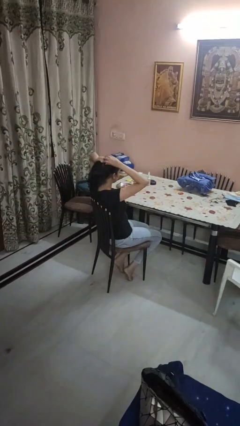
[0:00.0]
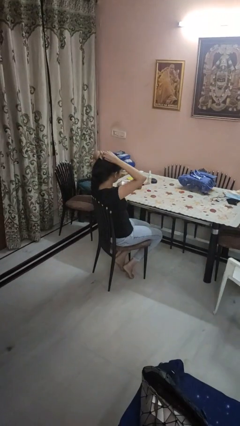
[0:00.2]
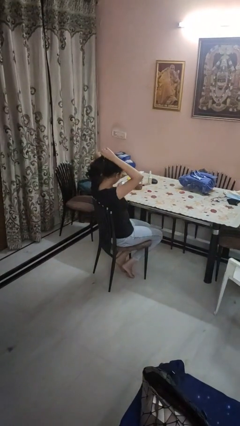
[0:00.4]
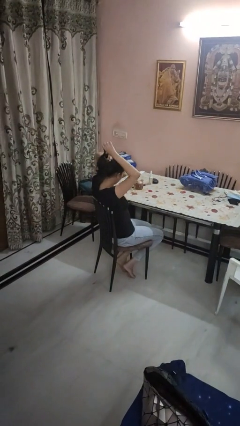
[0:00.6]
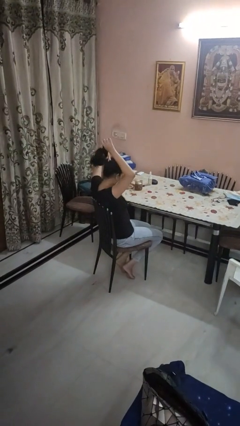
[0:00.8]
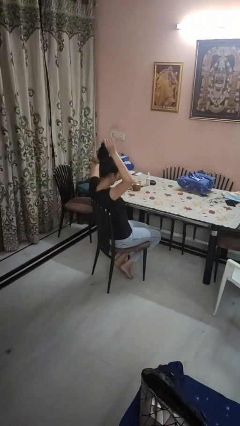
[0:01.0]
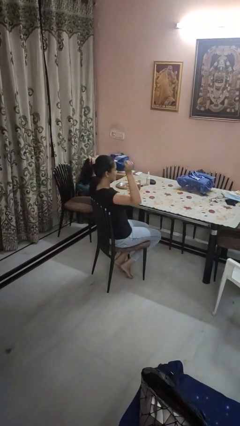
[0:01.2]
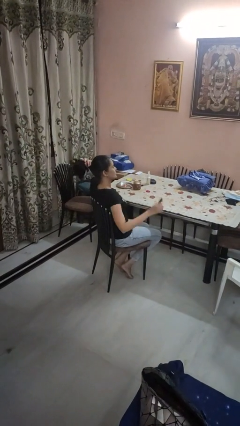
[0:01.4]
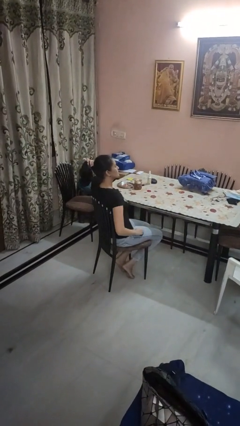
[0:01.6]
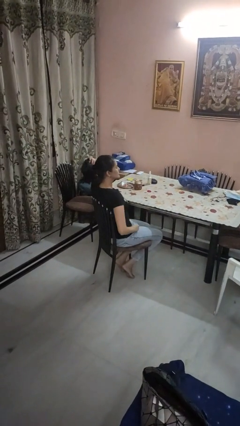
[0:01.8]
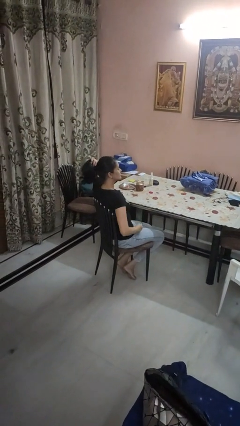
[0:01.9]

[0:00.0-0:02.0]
person takes off hairtie

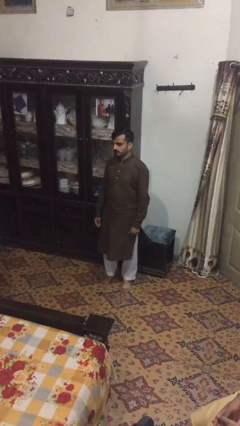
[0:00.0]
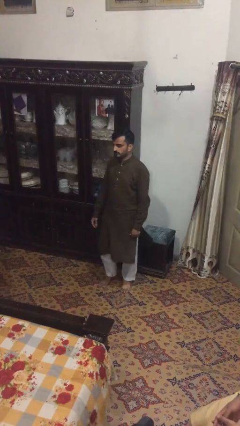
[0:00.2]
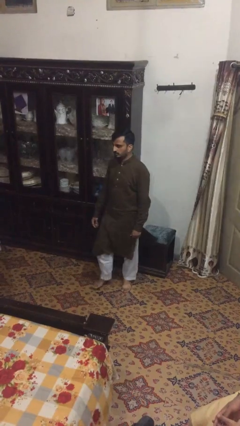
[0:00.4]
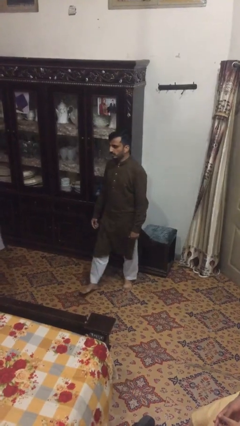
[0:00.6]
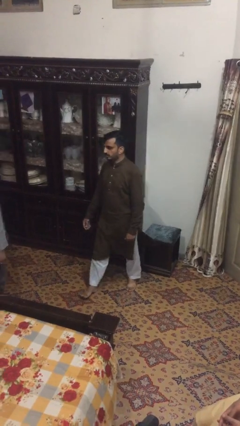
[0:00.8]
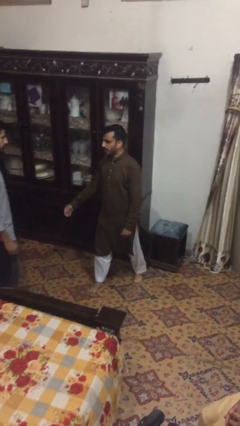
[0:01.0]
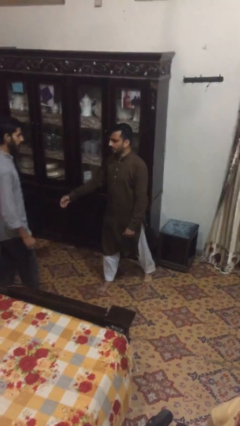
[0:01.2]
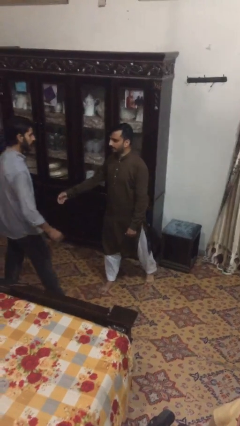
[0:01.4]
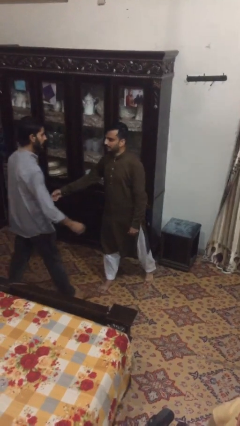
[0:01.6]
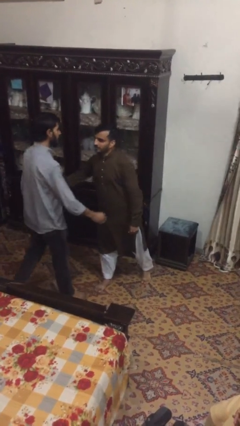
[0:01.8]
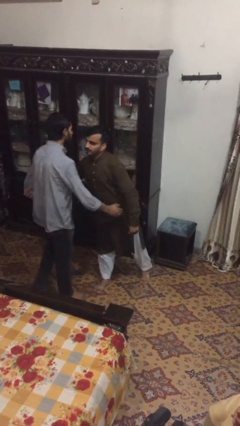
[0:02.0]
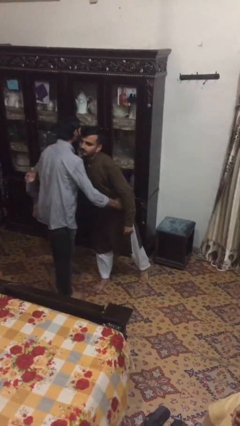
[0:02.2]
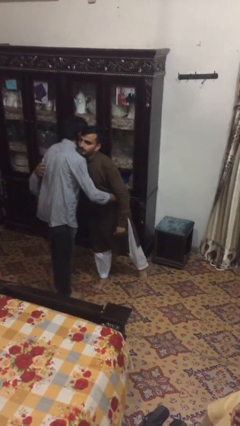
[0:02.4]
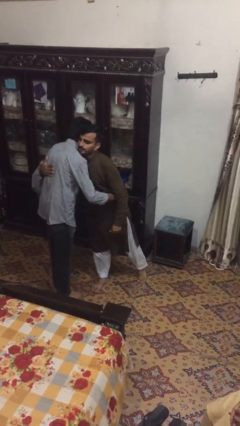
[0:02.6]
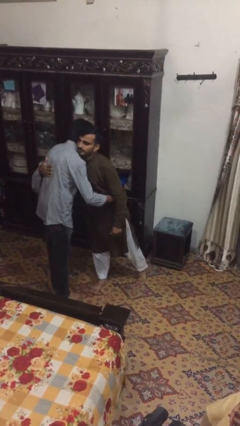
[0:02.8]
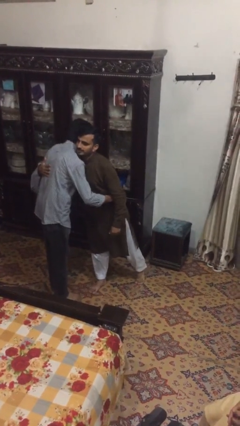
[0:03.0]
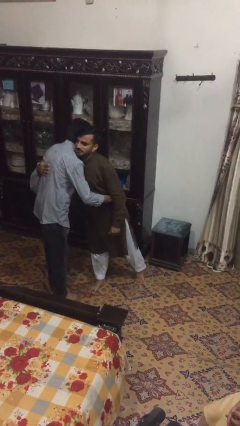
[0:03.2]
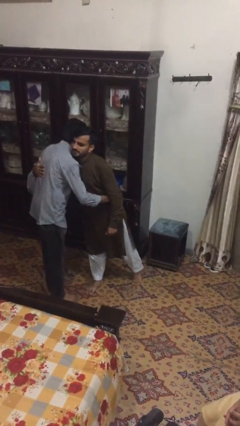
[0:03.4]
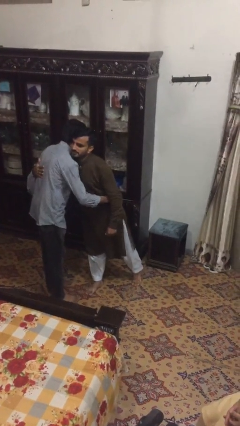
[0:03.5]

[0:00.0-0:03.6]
person embraces person

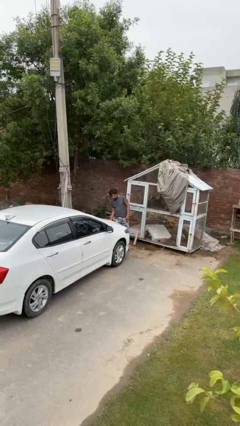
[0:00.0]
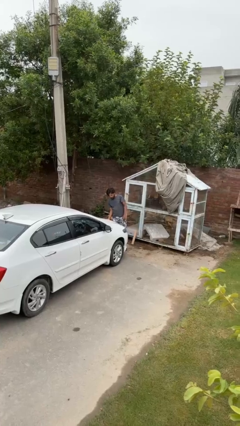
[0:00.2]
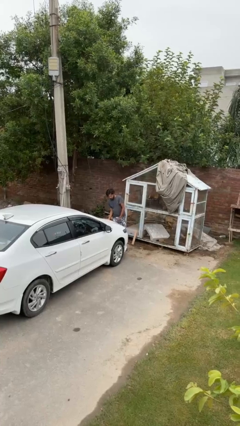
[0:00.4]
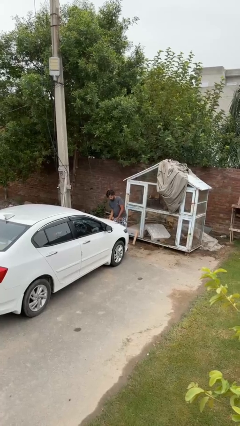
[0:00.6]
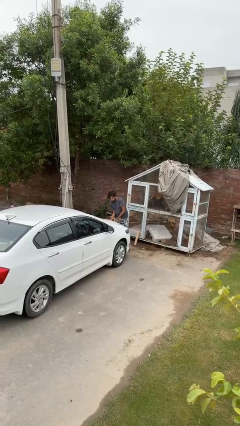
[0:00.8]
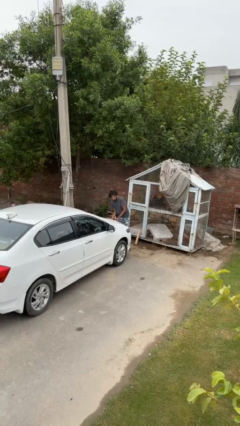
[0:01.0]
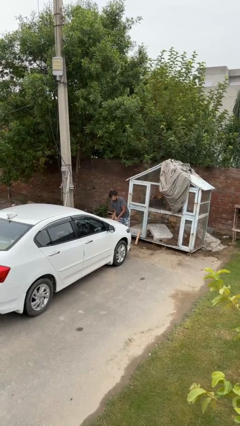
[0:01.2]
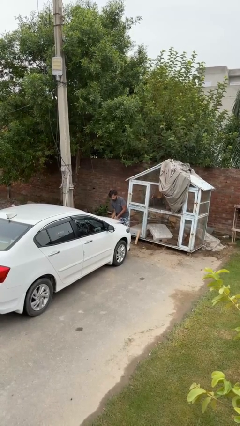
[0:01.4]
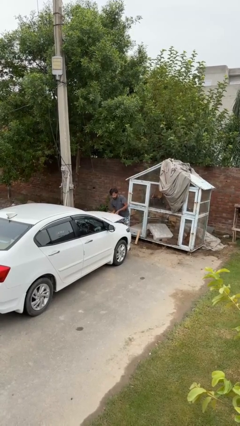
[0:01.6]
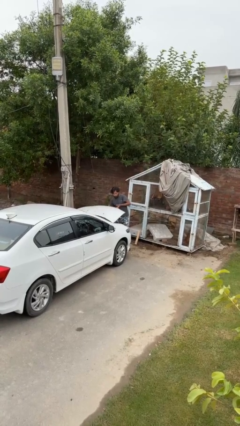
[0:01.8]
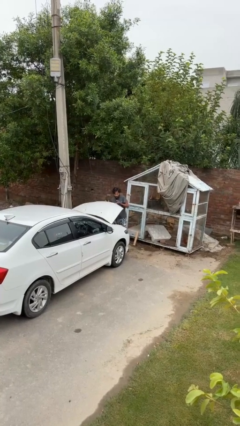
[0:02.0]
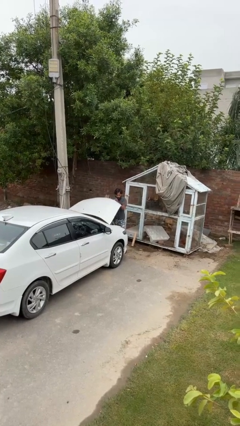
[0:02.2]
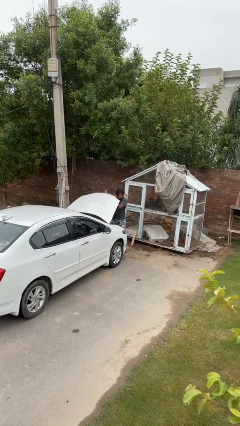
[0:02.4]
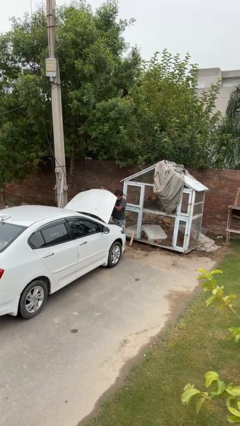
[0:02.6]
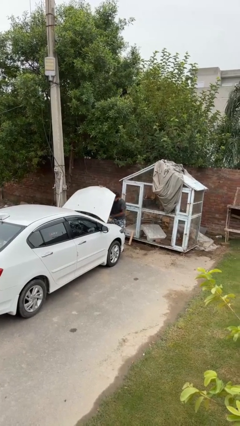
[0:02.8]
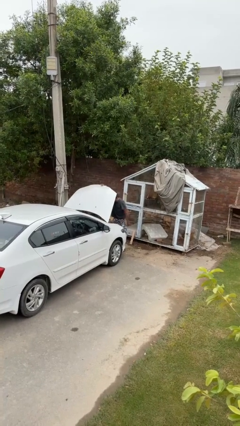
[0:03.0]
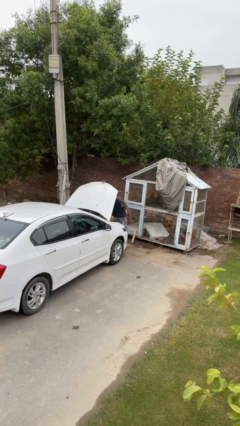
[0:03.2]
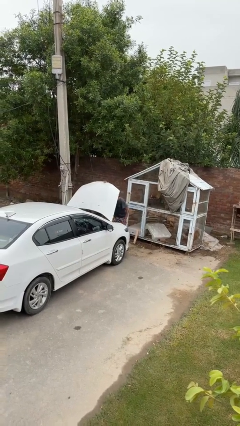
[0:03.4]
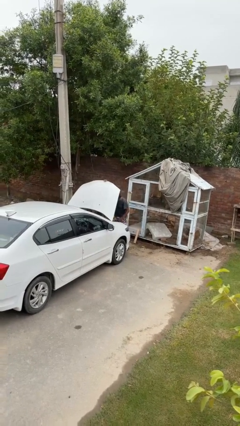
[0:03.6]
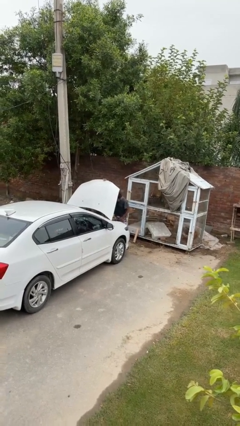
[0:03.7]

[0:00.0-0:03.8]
person opens car hood

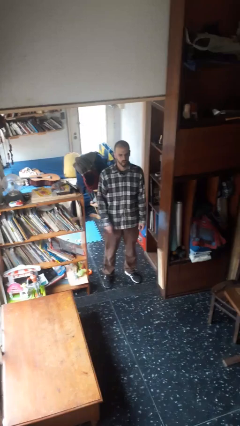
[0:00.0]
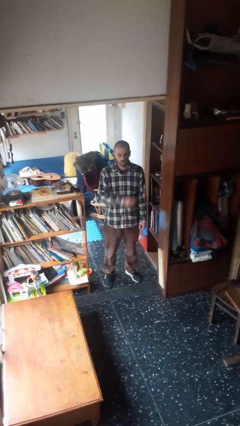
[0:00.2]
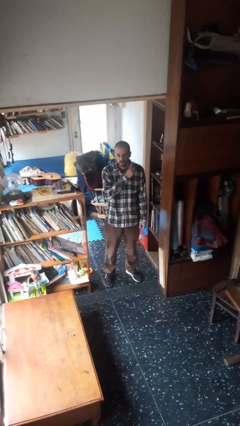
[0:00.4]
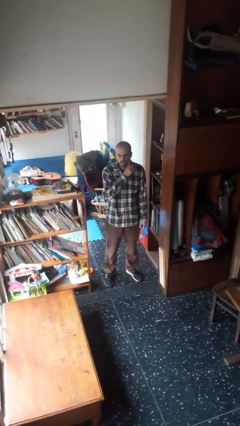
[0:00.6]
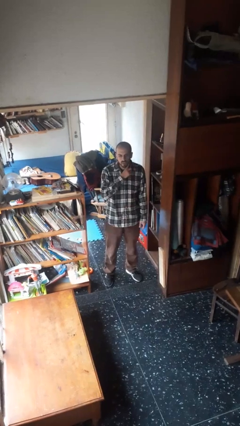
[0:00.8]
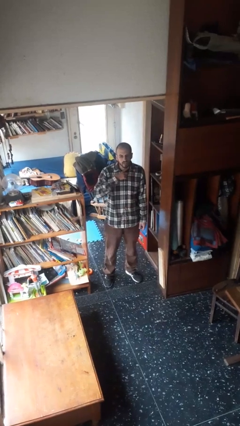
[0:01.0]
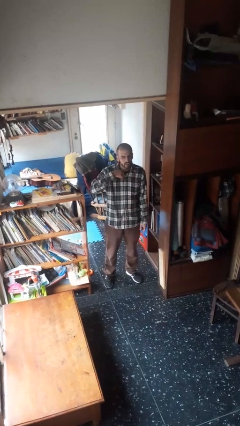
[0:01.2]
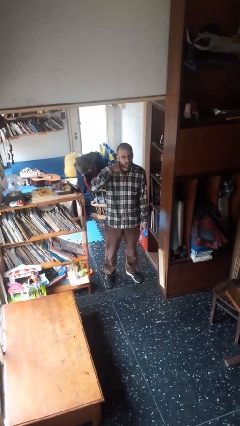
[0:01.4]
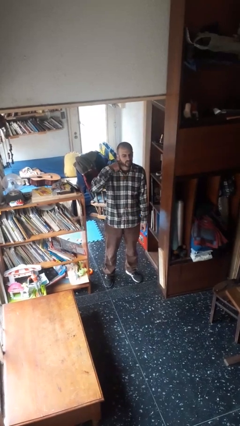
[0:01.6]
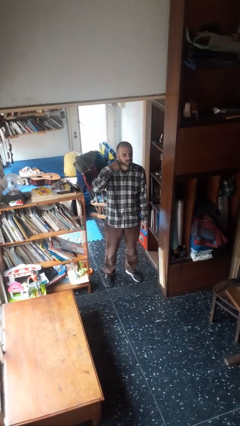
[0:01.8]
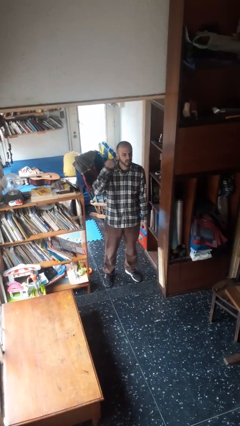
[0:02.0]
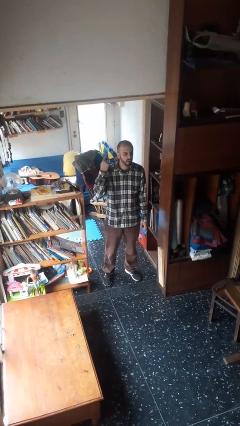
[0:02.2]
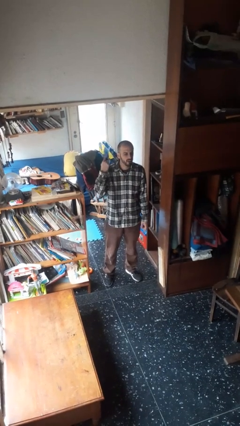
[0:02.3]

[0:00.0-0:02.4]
person gestures cut

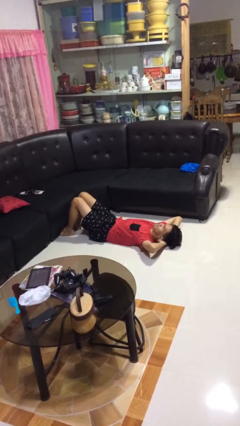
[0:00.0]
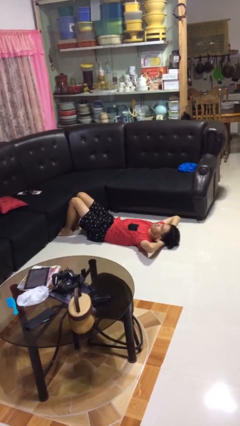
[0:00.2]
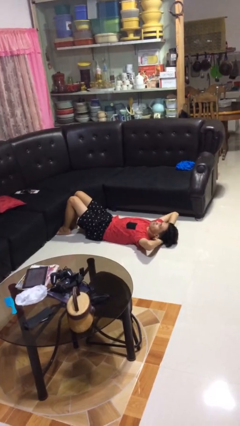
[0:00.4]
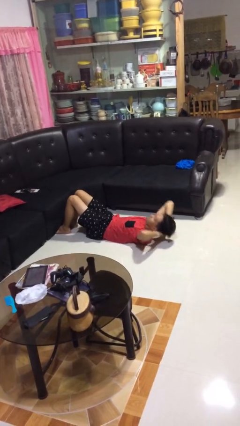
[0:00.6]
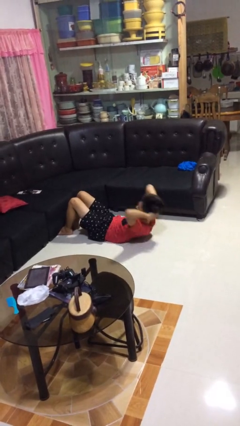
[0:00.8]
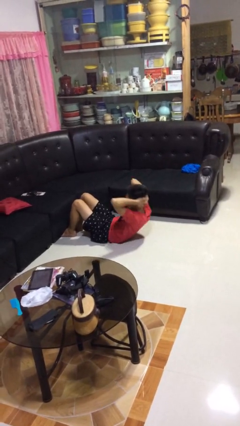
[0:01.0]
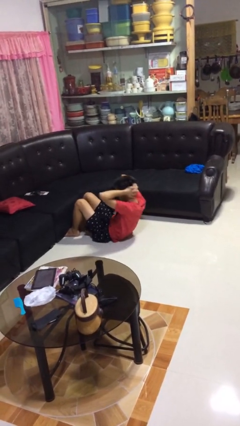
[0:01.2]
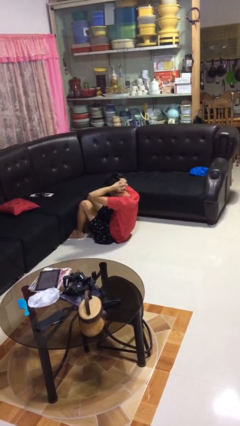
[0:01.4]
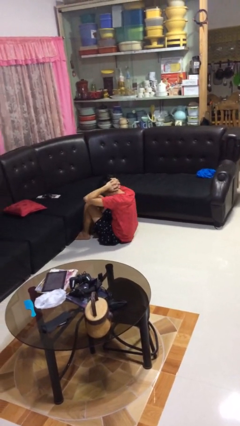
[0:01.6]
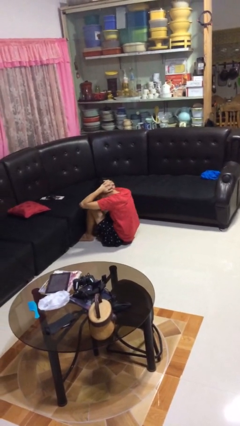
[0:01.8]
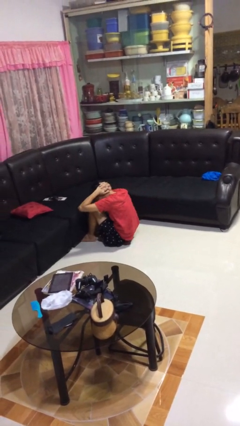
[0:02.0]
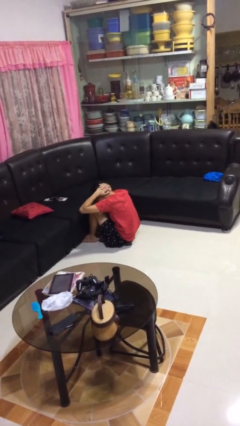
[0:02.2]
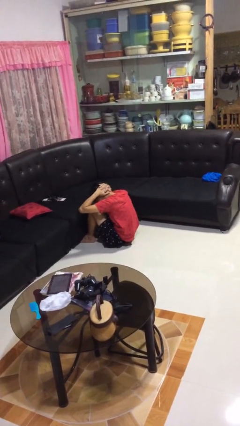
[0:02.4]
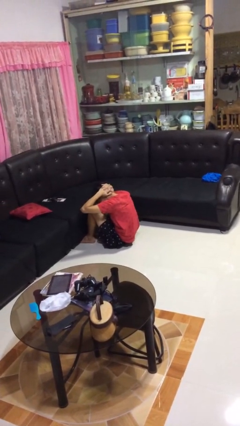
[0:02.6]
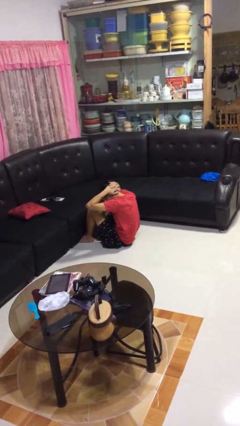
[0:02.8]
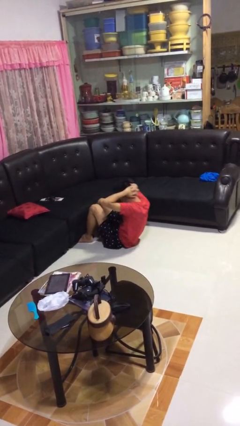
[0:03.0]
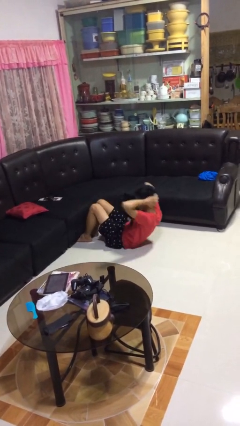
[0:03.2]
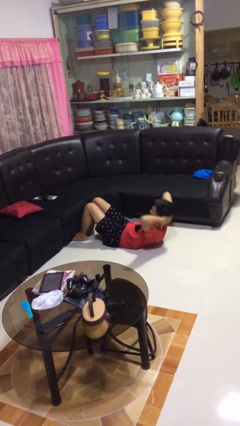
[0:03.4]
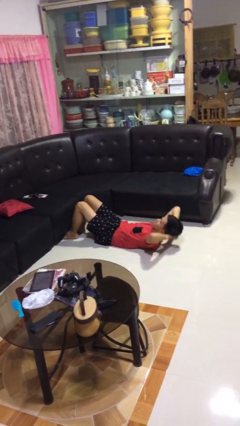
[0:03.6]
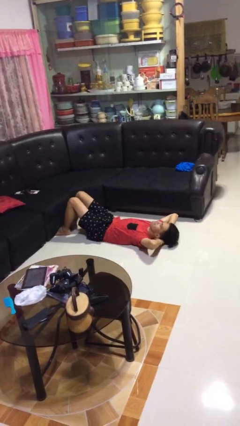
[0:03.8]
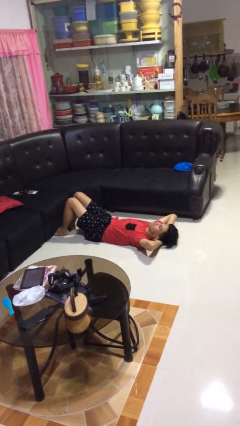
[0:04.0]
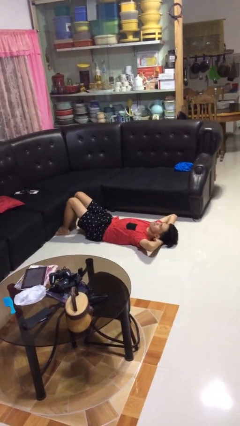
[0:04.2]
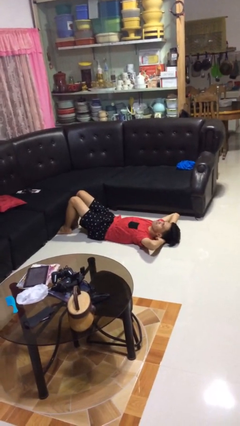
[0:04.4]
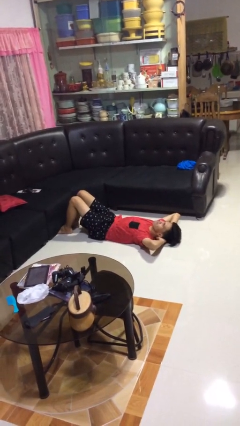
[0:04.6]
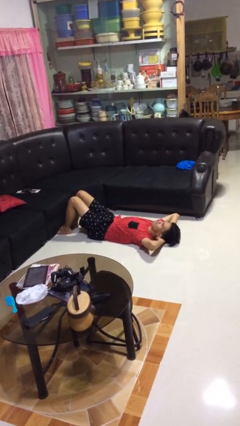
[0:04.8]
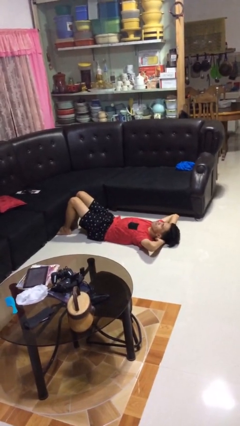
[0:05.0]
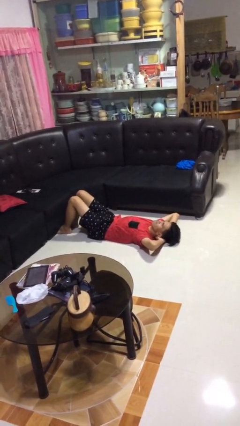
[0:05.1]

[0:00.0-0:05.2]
person exercises with situp

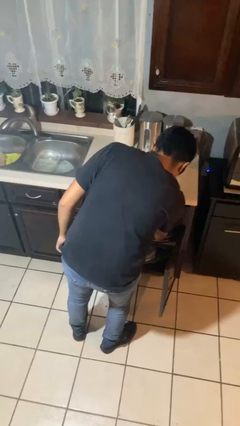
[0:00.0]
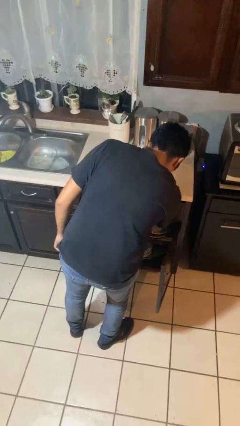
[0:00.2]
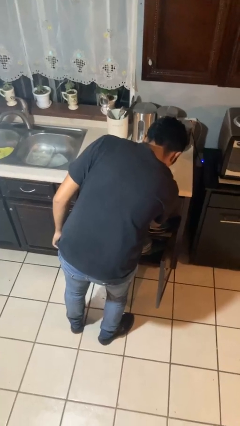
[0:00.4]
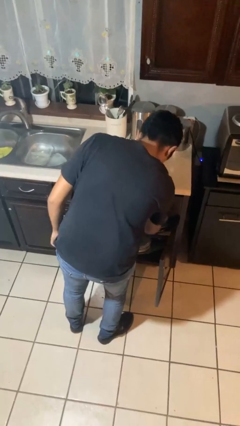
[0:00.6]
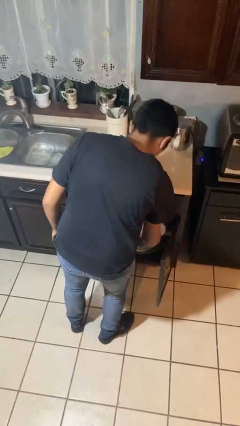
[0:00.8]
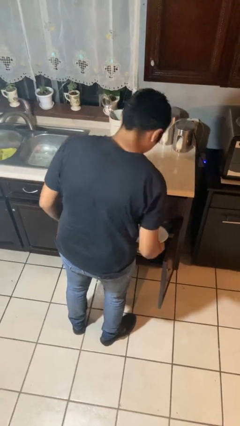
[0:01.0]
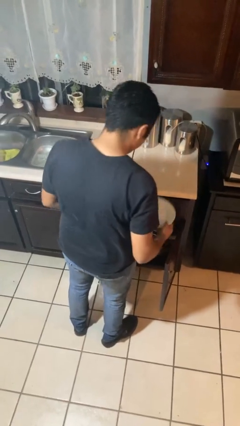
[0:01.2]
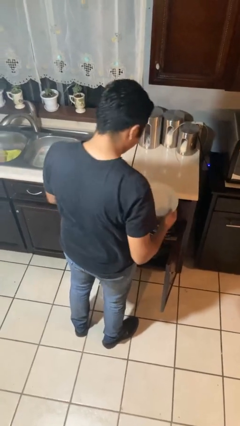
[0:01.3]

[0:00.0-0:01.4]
person puts object in cabinet
